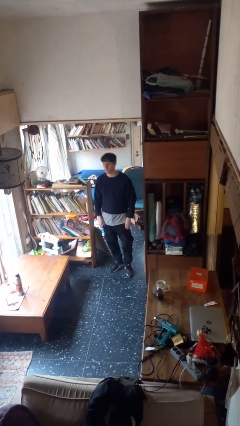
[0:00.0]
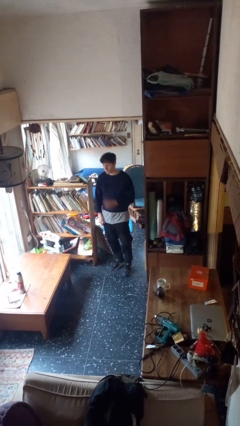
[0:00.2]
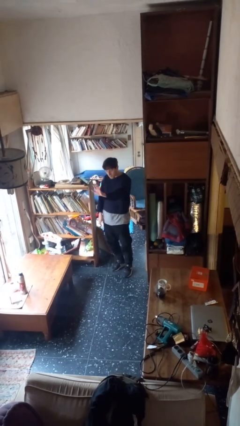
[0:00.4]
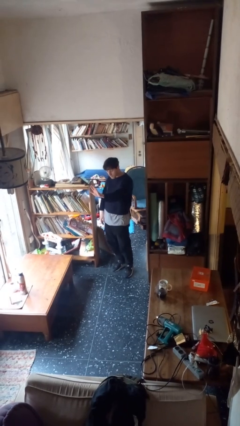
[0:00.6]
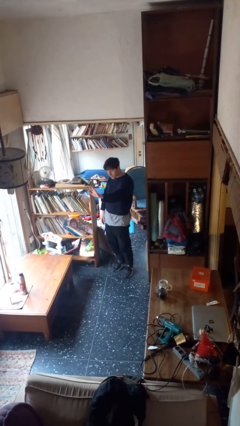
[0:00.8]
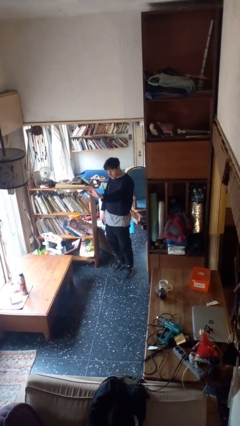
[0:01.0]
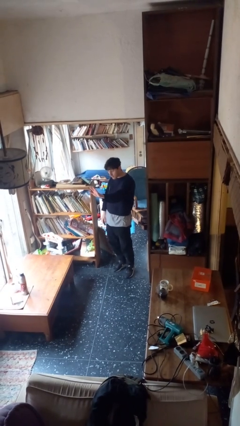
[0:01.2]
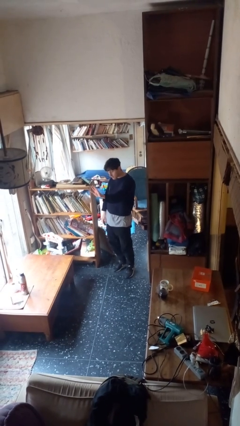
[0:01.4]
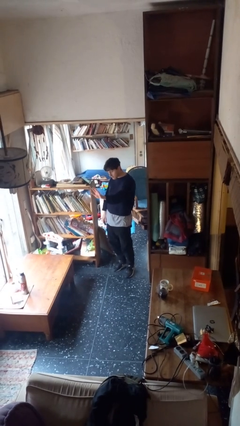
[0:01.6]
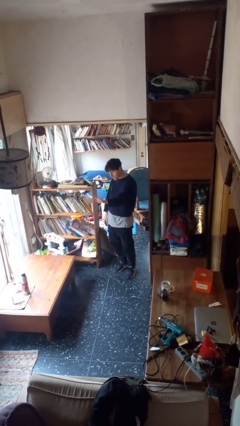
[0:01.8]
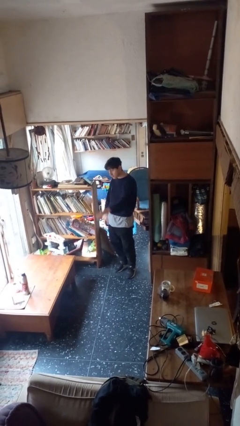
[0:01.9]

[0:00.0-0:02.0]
person gestures stop

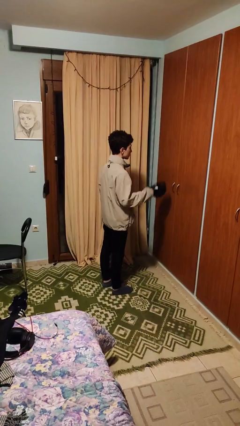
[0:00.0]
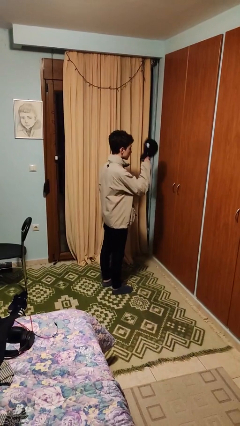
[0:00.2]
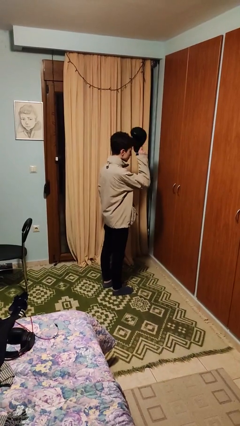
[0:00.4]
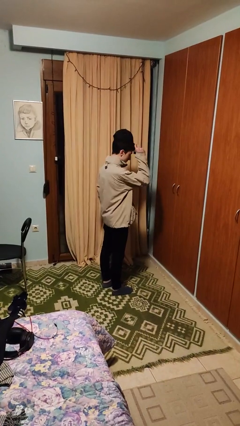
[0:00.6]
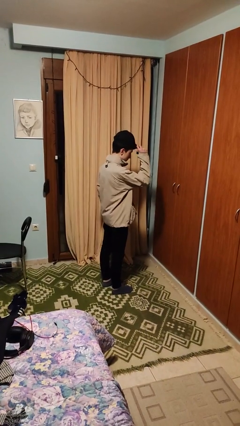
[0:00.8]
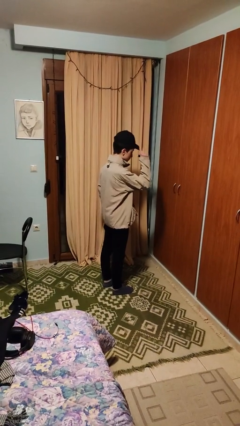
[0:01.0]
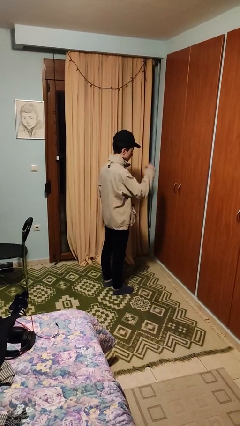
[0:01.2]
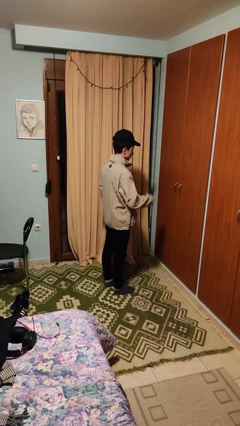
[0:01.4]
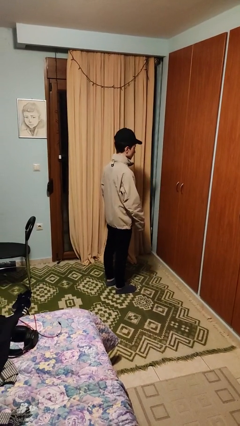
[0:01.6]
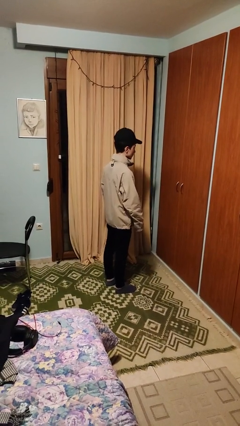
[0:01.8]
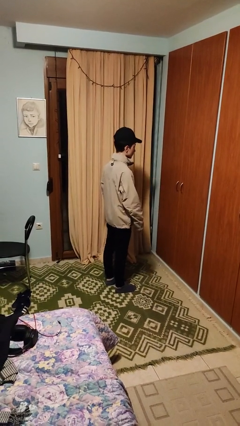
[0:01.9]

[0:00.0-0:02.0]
person puts on hat

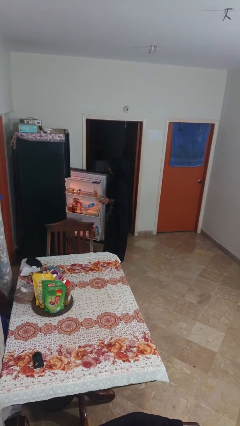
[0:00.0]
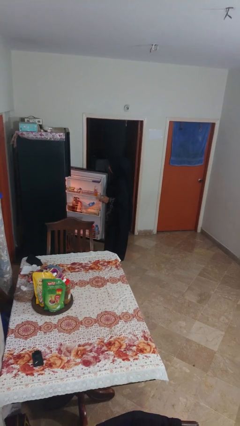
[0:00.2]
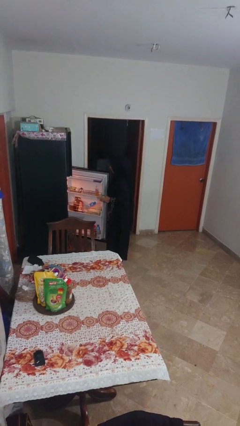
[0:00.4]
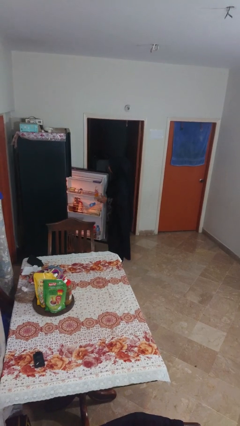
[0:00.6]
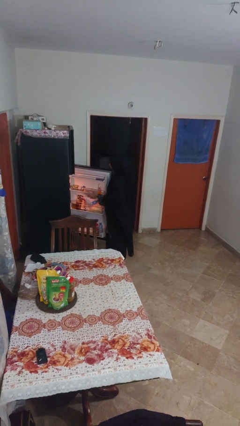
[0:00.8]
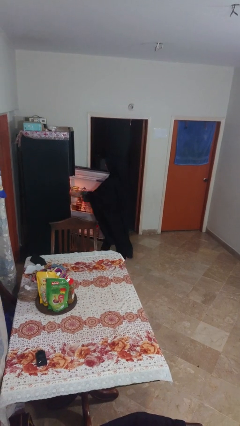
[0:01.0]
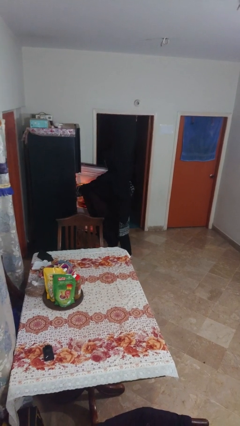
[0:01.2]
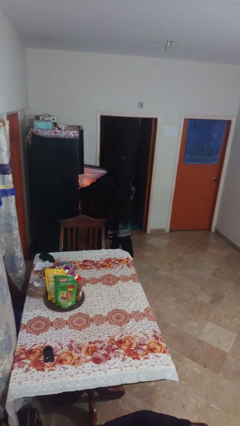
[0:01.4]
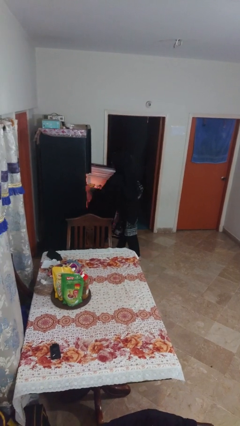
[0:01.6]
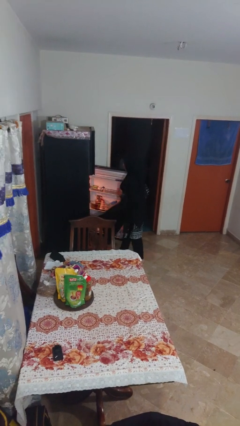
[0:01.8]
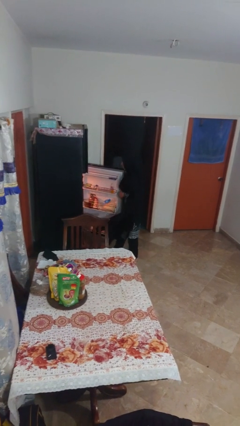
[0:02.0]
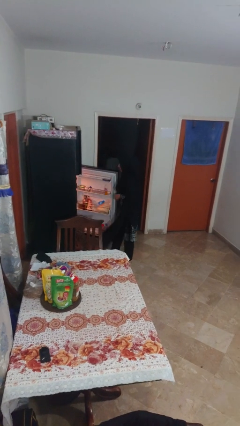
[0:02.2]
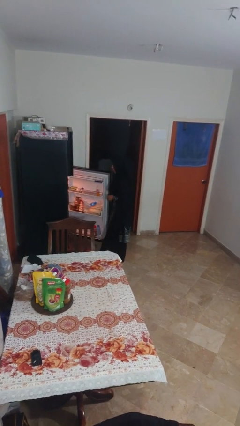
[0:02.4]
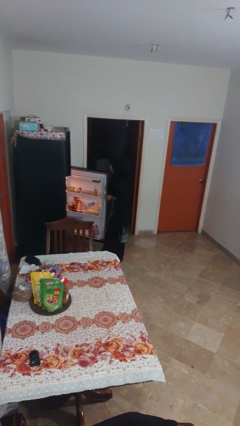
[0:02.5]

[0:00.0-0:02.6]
person puts object into refrigerator

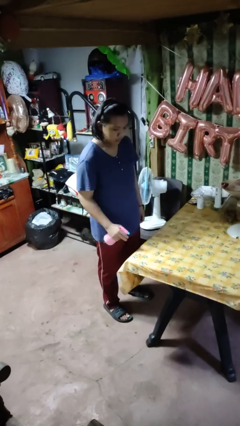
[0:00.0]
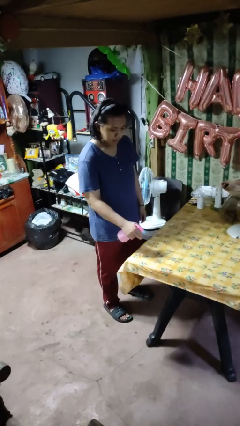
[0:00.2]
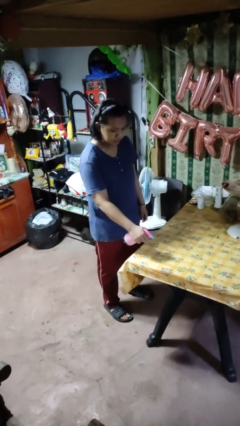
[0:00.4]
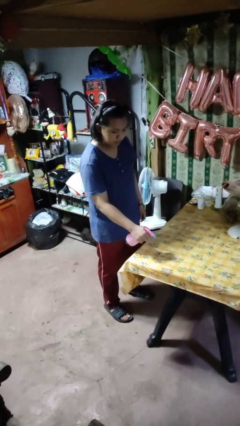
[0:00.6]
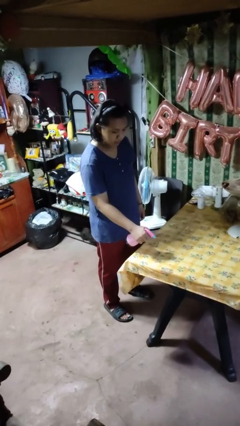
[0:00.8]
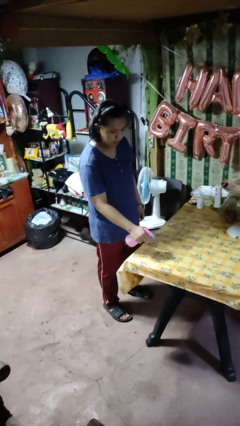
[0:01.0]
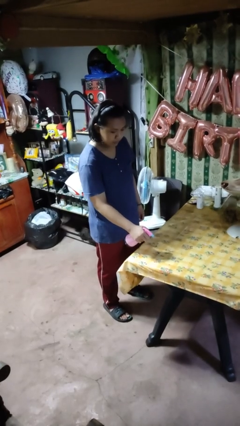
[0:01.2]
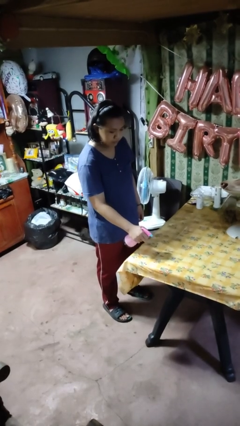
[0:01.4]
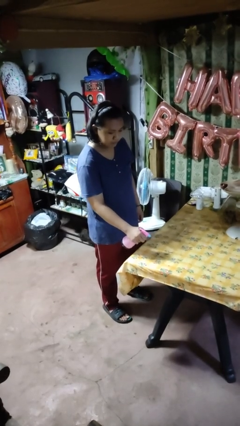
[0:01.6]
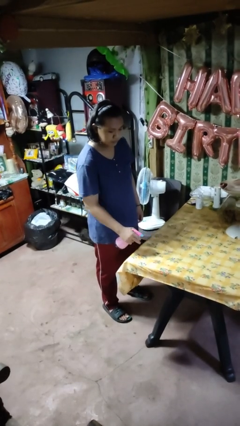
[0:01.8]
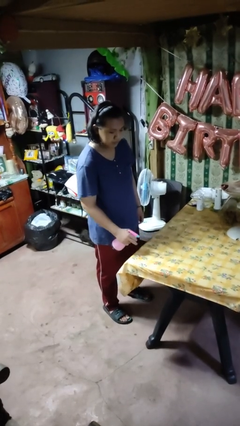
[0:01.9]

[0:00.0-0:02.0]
person sprays from bottle

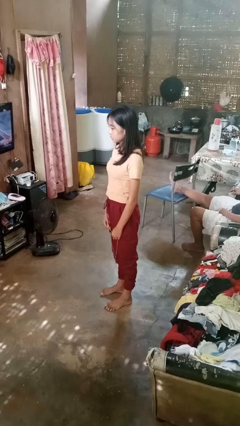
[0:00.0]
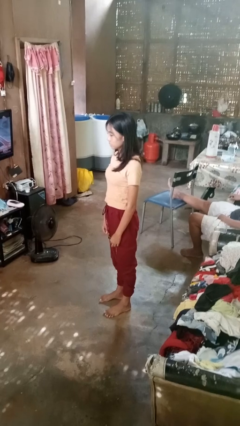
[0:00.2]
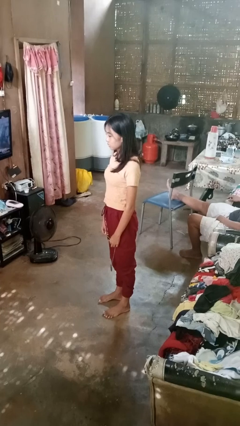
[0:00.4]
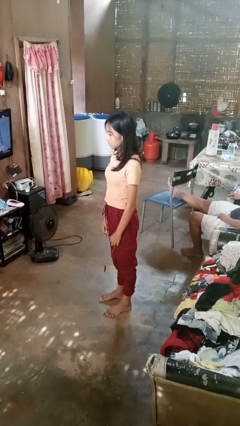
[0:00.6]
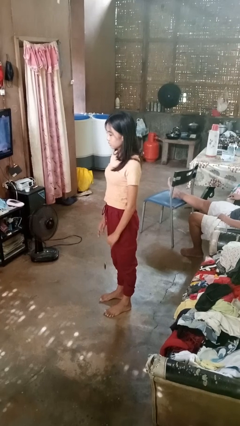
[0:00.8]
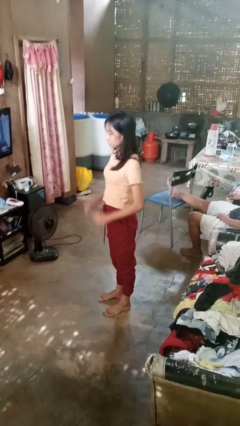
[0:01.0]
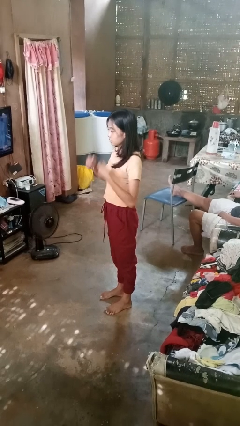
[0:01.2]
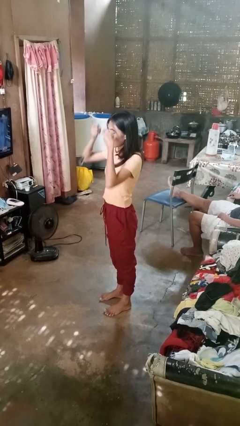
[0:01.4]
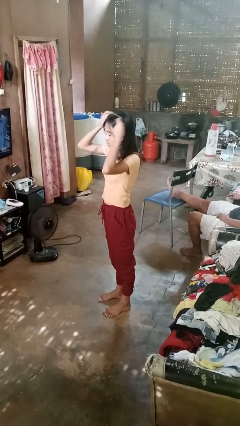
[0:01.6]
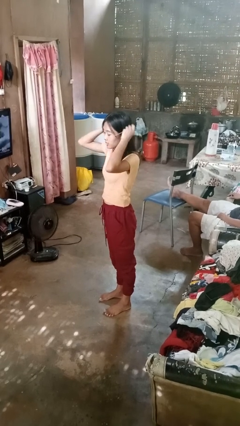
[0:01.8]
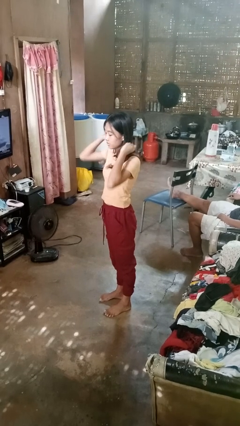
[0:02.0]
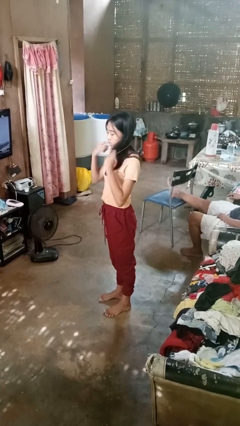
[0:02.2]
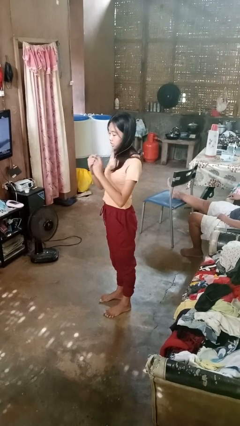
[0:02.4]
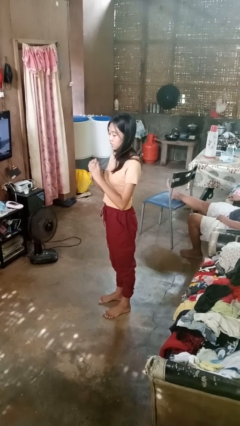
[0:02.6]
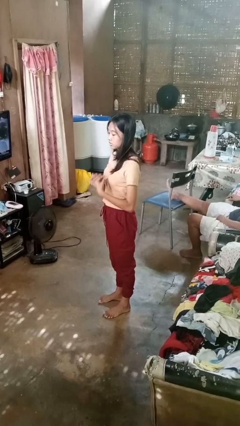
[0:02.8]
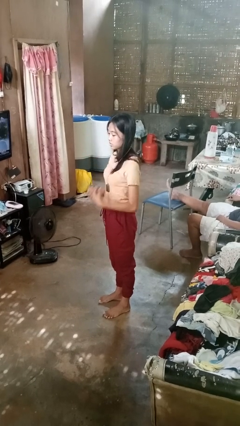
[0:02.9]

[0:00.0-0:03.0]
person puts on belt

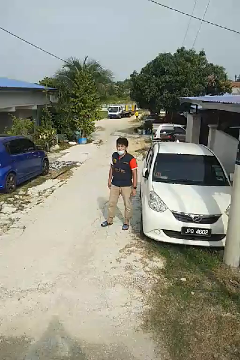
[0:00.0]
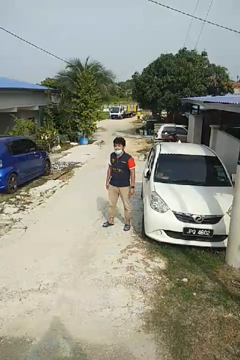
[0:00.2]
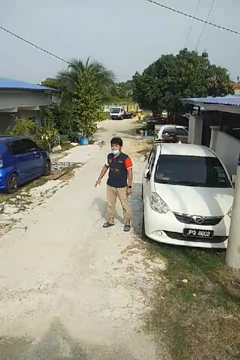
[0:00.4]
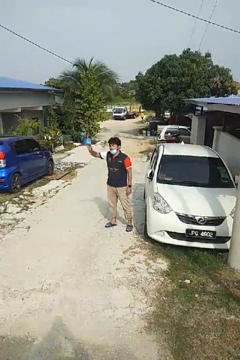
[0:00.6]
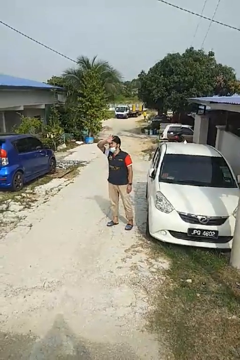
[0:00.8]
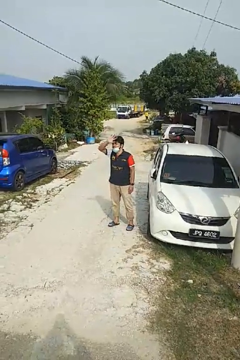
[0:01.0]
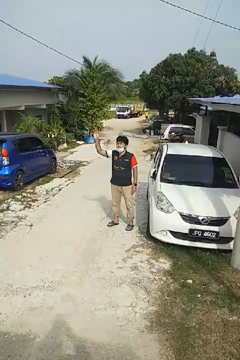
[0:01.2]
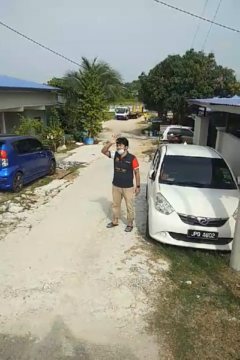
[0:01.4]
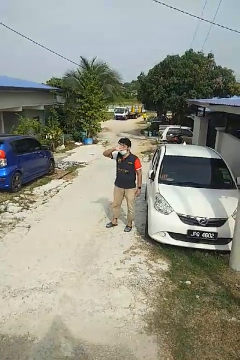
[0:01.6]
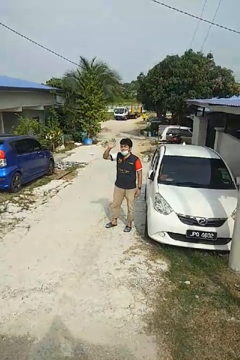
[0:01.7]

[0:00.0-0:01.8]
person waves at person

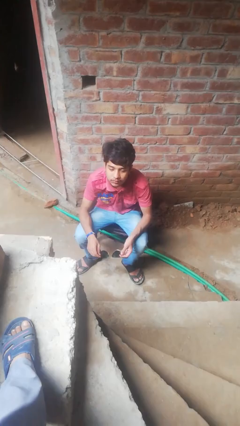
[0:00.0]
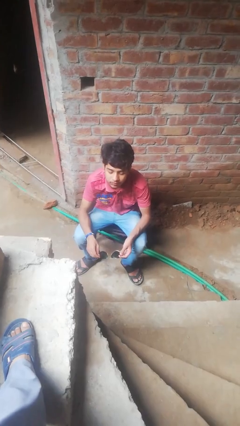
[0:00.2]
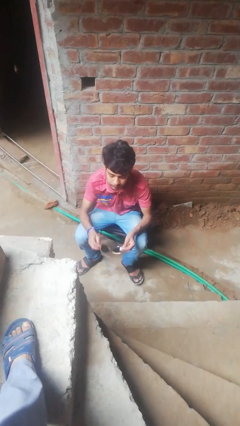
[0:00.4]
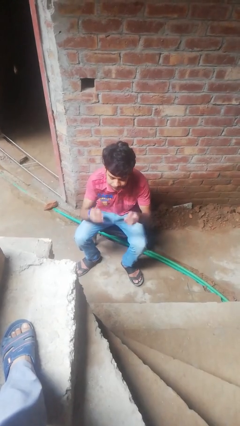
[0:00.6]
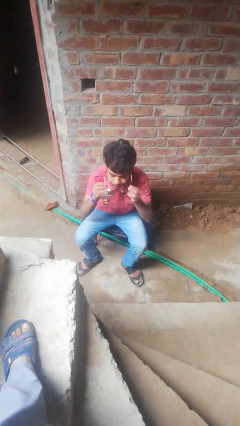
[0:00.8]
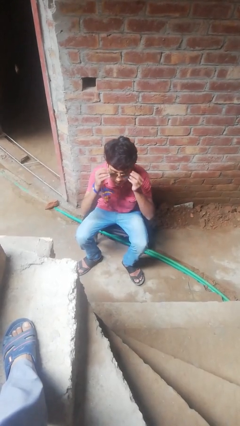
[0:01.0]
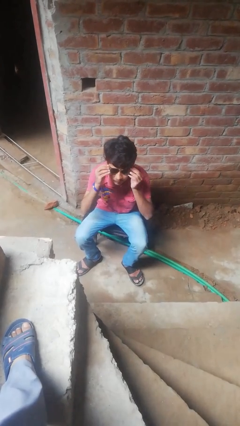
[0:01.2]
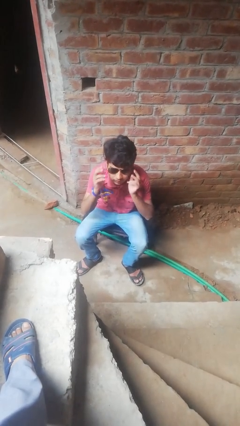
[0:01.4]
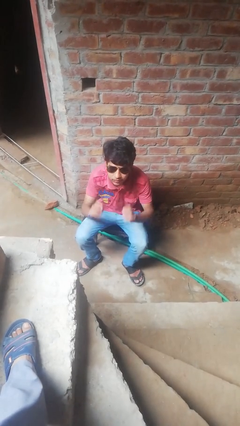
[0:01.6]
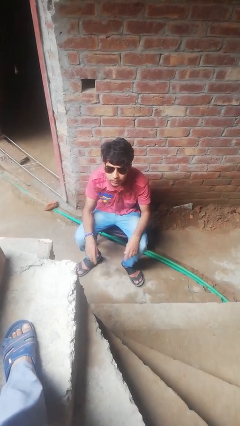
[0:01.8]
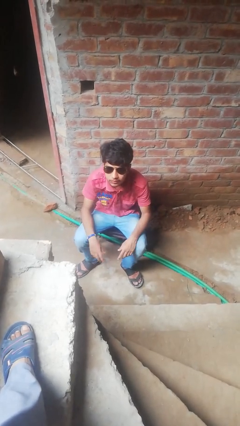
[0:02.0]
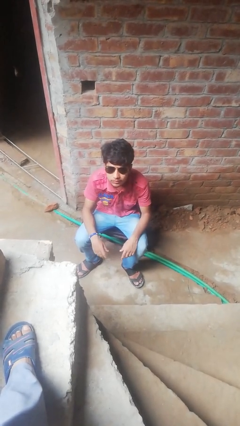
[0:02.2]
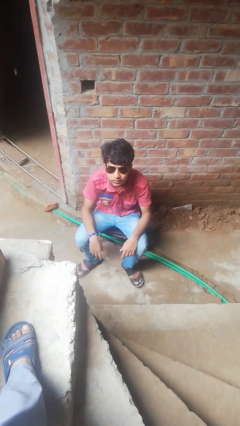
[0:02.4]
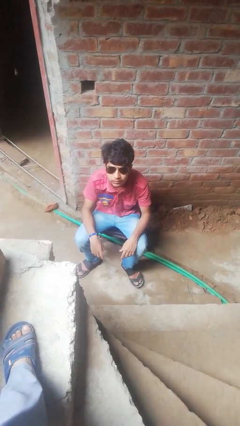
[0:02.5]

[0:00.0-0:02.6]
person puts on glasses

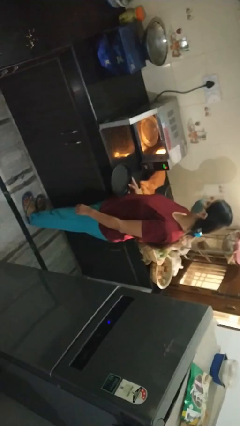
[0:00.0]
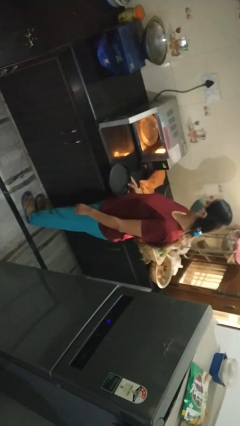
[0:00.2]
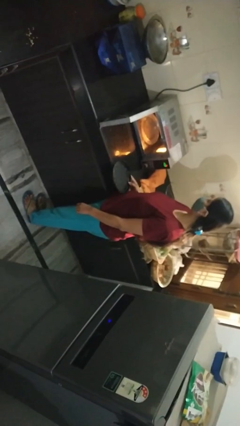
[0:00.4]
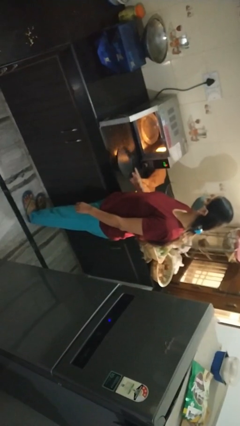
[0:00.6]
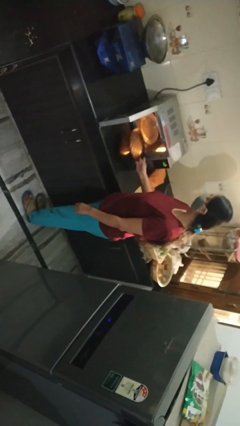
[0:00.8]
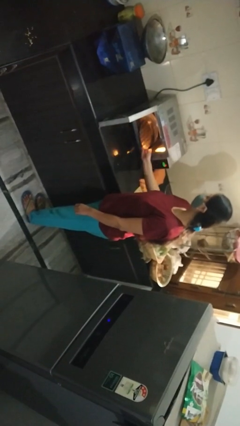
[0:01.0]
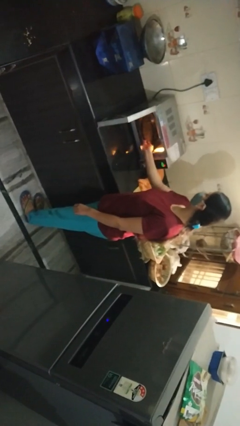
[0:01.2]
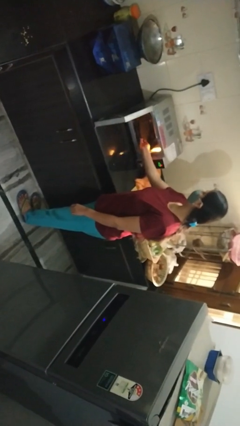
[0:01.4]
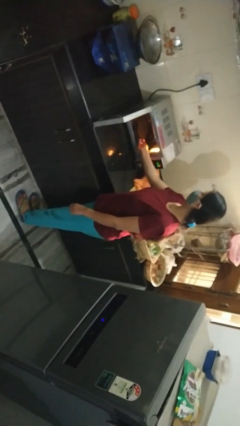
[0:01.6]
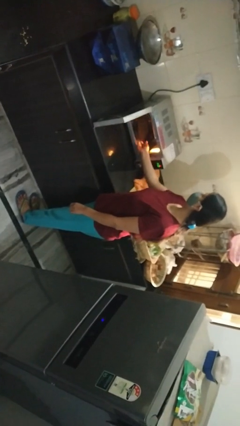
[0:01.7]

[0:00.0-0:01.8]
person puts object into microwave
